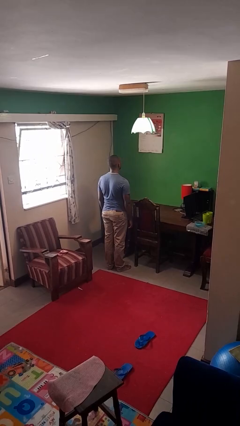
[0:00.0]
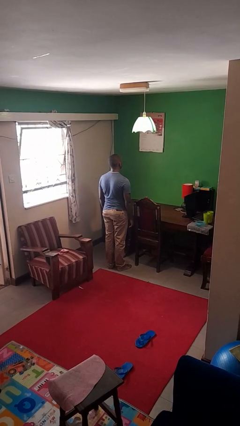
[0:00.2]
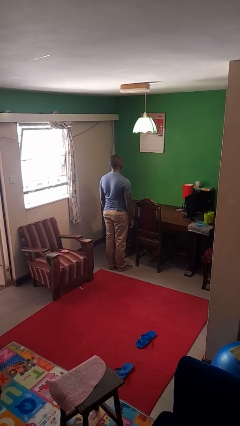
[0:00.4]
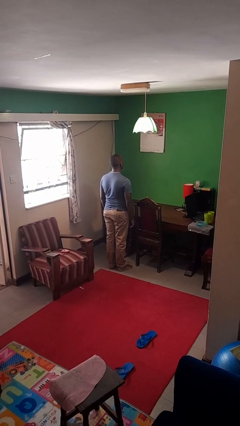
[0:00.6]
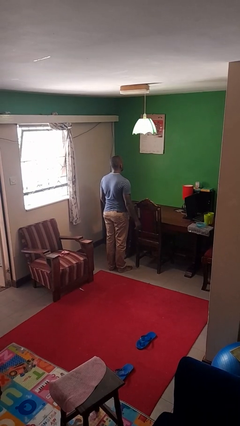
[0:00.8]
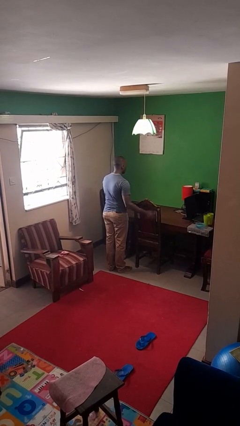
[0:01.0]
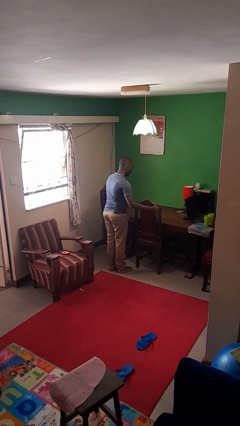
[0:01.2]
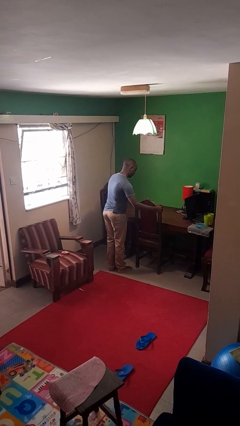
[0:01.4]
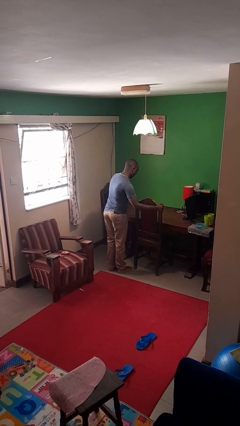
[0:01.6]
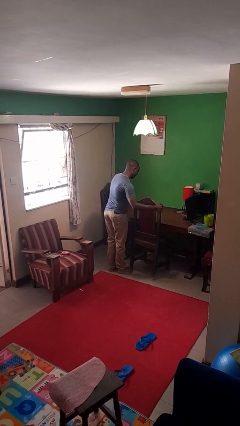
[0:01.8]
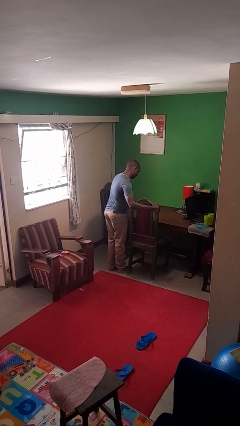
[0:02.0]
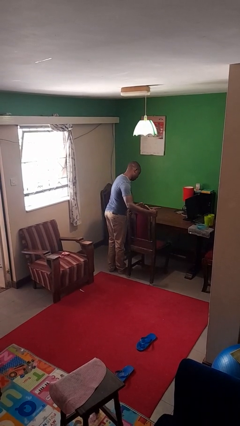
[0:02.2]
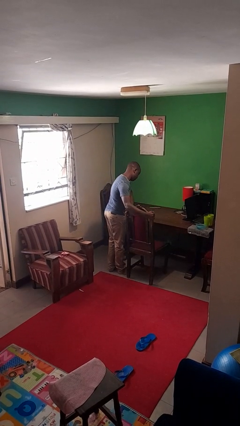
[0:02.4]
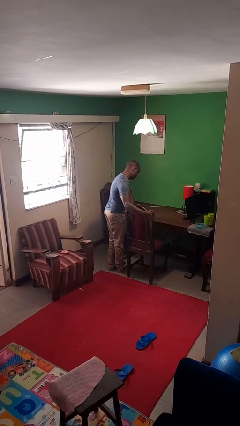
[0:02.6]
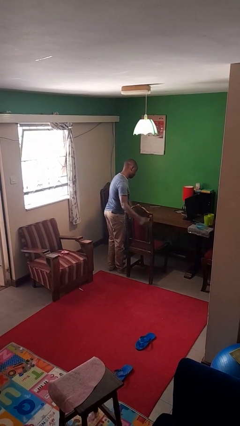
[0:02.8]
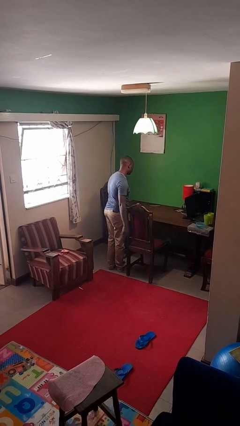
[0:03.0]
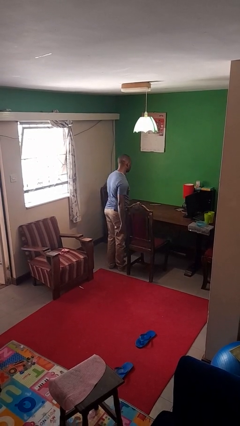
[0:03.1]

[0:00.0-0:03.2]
person pulls out chair

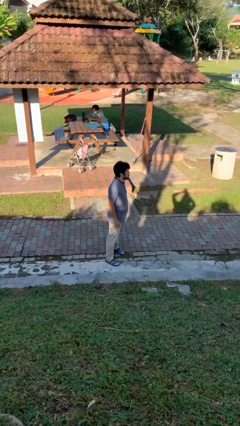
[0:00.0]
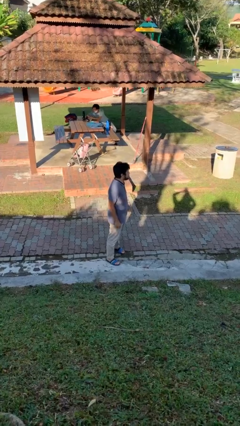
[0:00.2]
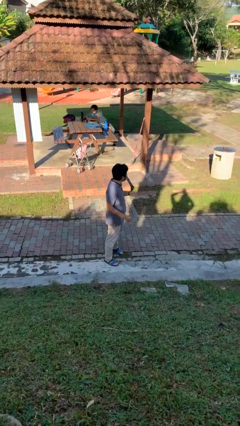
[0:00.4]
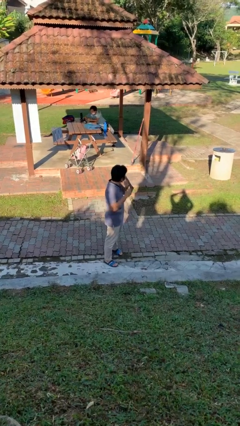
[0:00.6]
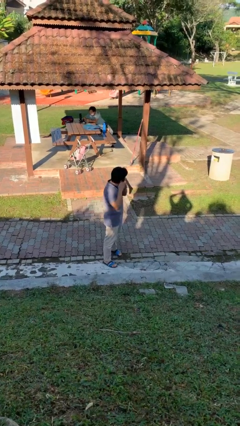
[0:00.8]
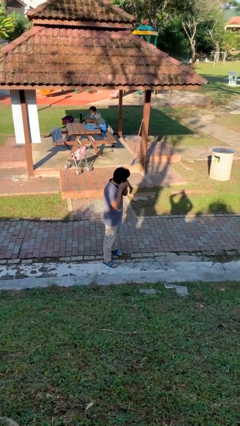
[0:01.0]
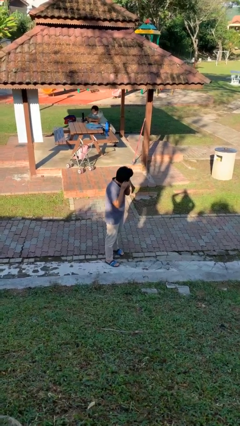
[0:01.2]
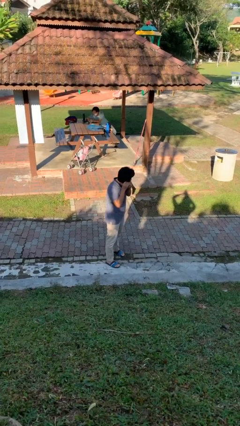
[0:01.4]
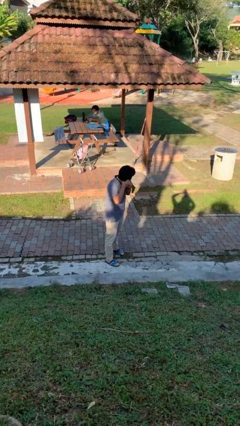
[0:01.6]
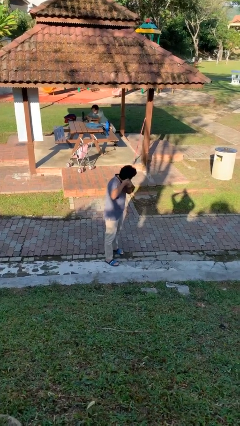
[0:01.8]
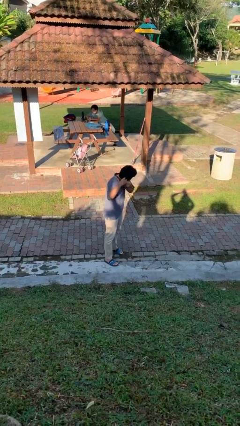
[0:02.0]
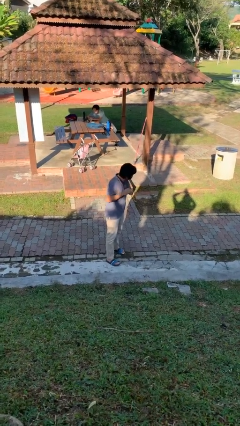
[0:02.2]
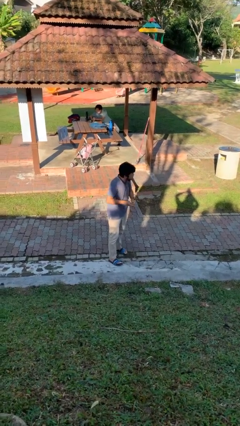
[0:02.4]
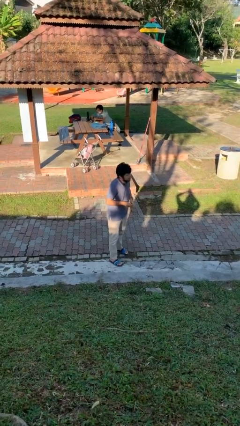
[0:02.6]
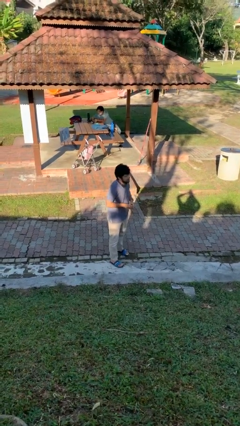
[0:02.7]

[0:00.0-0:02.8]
person takes off earrings

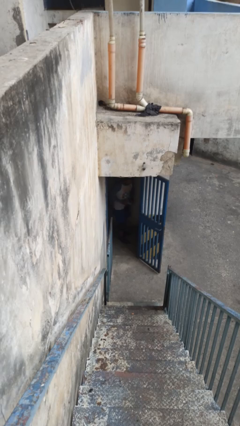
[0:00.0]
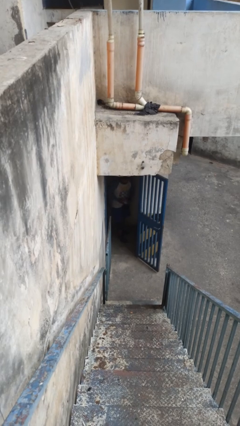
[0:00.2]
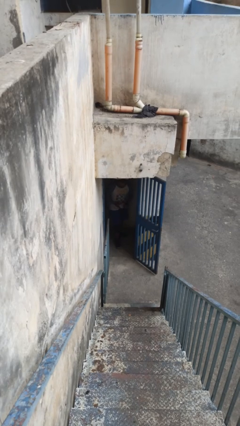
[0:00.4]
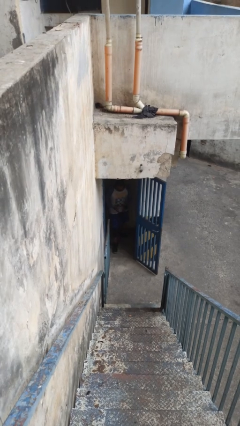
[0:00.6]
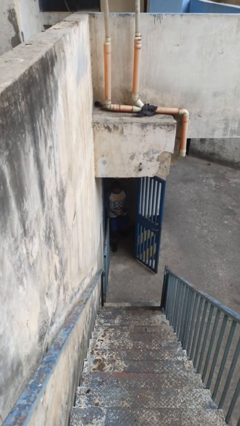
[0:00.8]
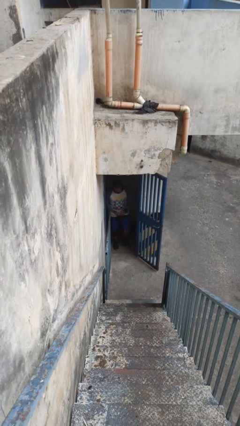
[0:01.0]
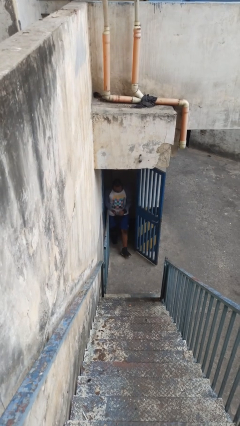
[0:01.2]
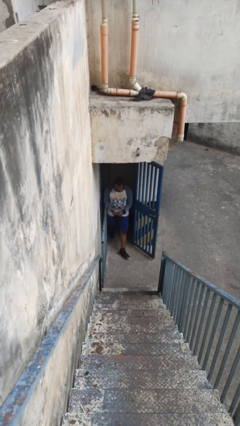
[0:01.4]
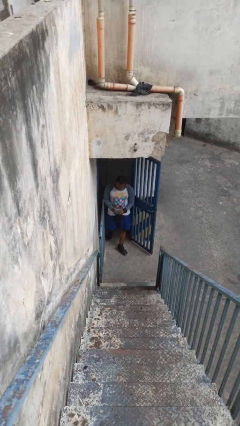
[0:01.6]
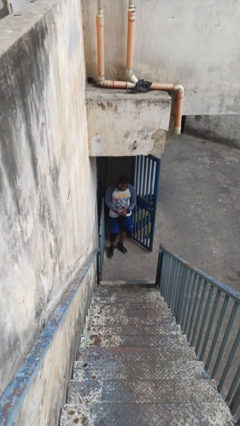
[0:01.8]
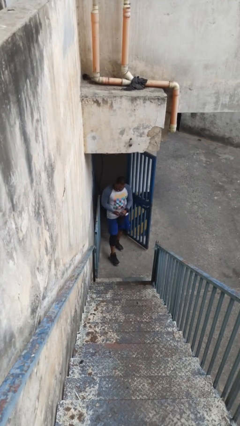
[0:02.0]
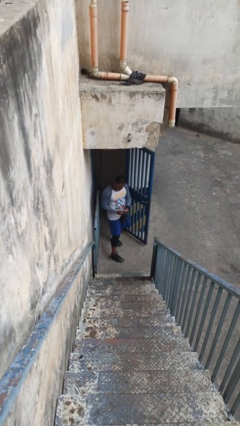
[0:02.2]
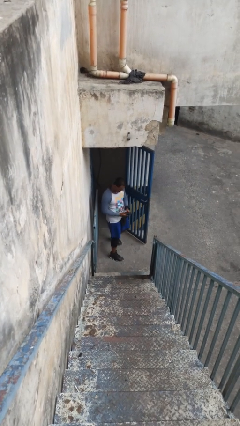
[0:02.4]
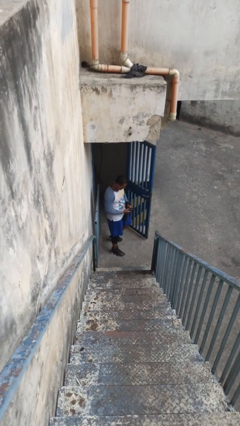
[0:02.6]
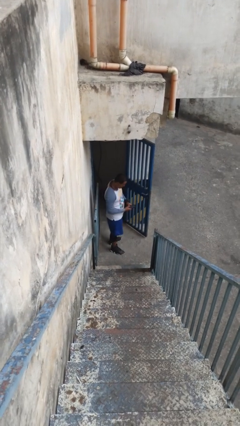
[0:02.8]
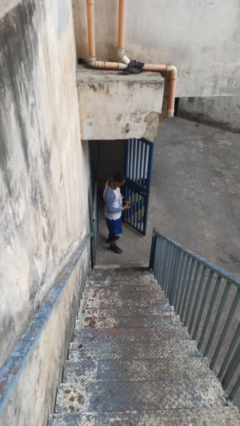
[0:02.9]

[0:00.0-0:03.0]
person enters scene through structure

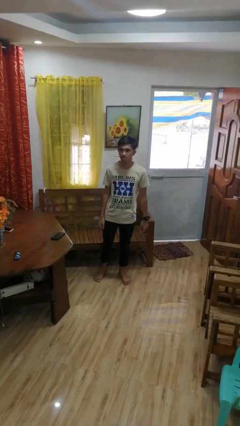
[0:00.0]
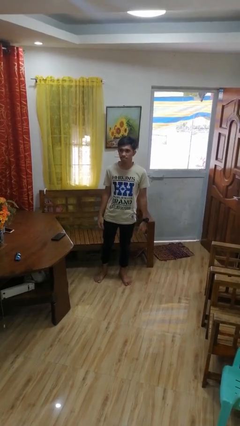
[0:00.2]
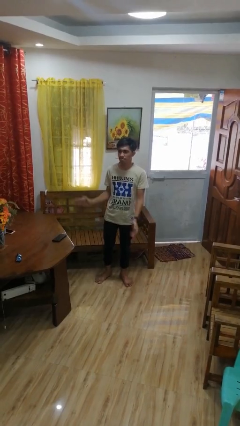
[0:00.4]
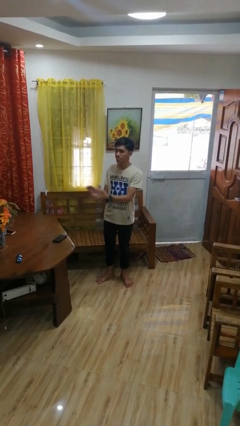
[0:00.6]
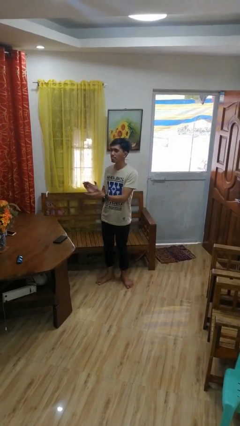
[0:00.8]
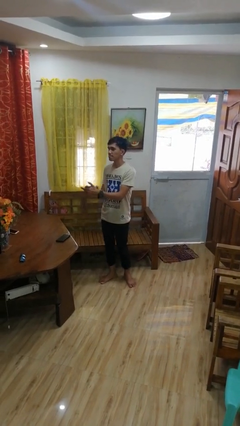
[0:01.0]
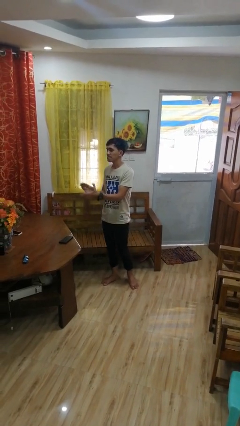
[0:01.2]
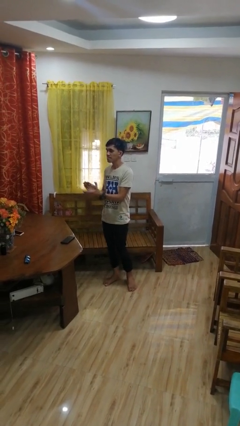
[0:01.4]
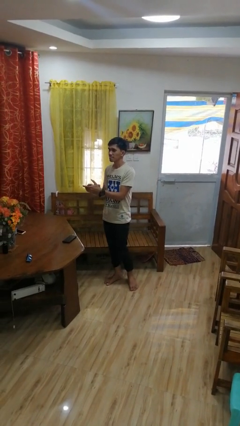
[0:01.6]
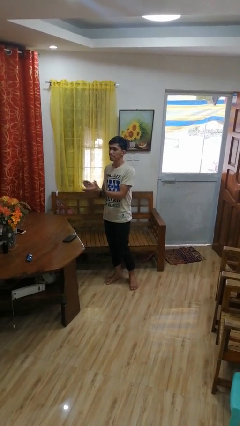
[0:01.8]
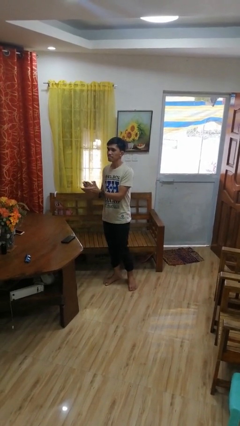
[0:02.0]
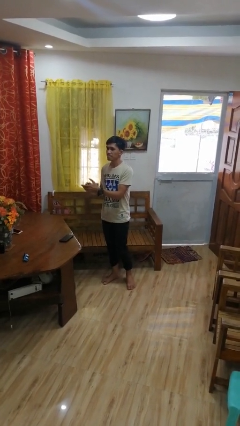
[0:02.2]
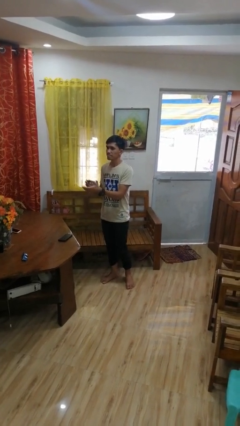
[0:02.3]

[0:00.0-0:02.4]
person claps hands

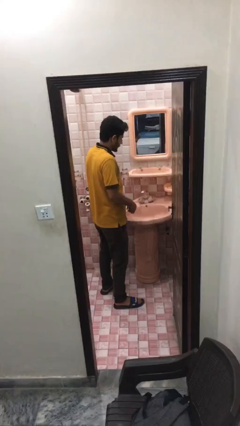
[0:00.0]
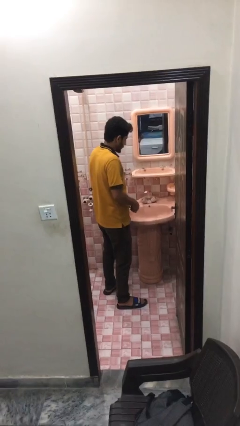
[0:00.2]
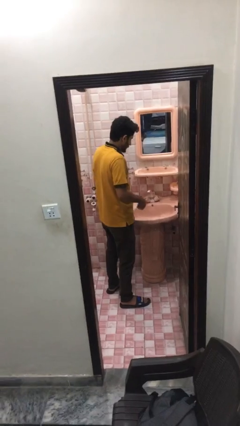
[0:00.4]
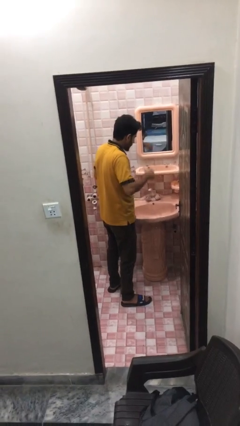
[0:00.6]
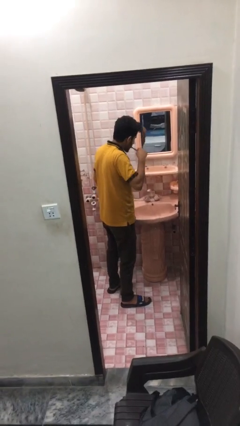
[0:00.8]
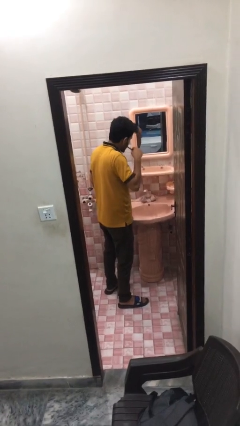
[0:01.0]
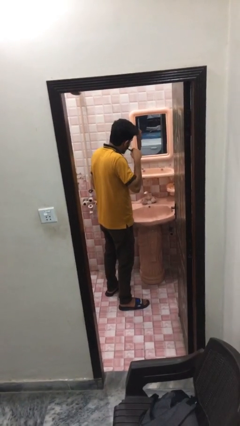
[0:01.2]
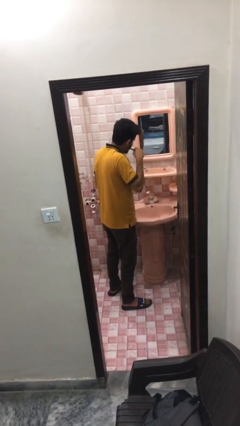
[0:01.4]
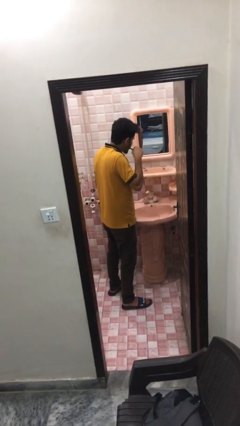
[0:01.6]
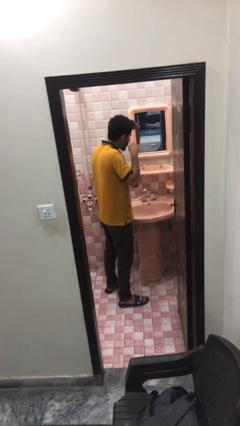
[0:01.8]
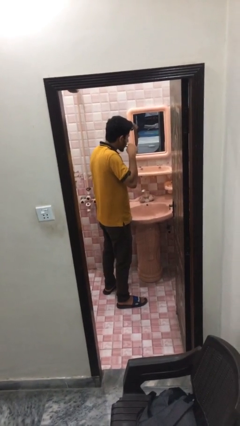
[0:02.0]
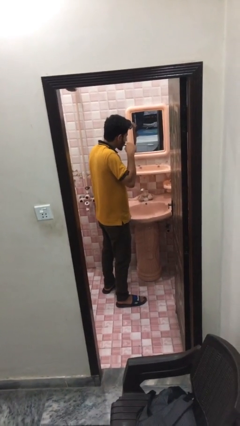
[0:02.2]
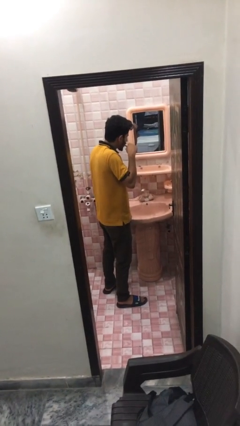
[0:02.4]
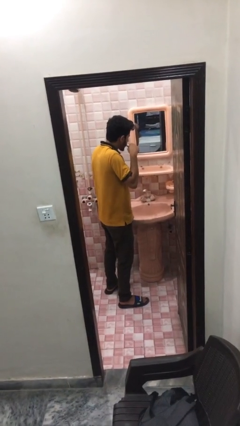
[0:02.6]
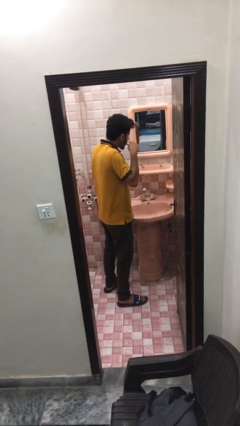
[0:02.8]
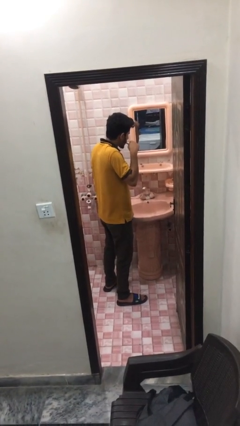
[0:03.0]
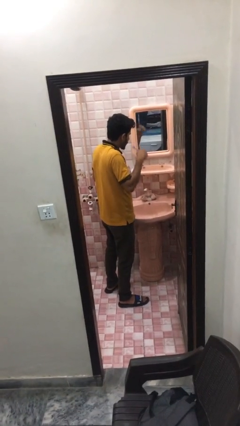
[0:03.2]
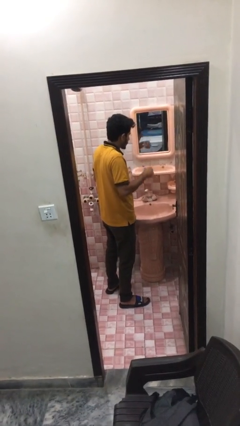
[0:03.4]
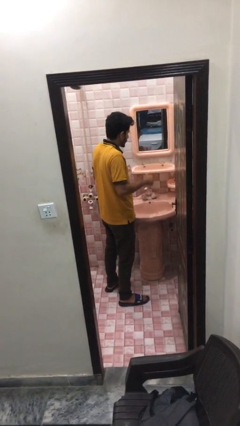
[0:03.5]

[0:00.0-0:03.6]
person brushes teeth

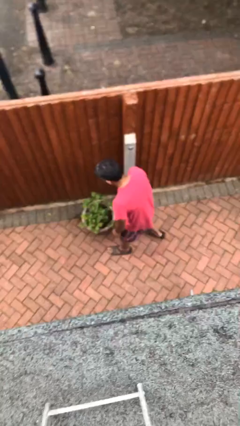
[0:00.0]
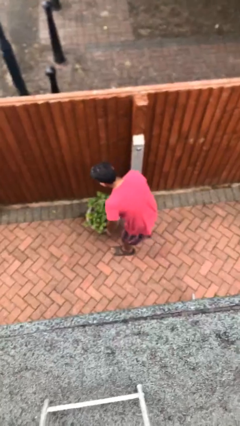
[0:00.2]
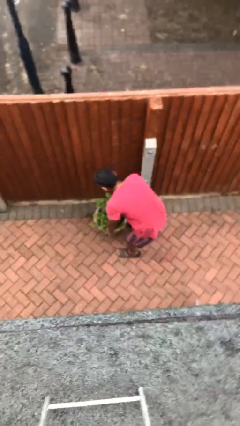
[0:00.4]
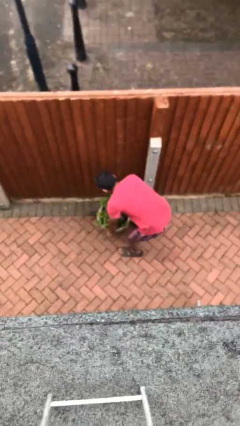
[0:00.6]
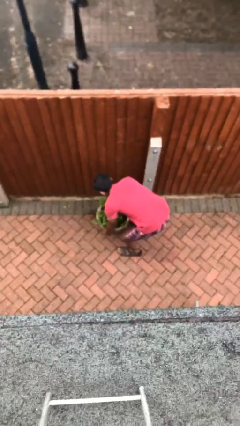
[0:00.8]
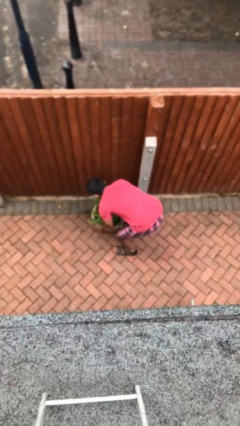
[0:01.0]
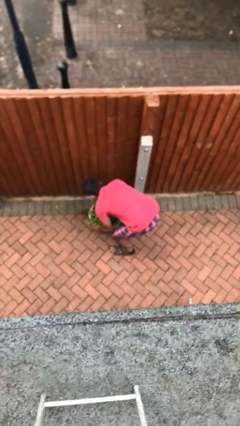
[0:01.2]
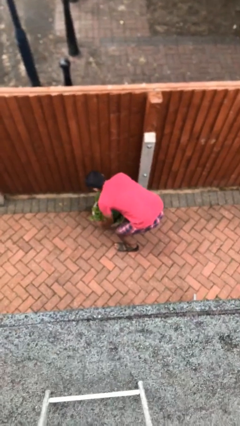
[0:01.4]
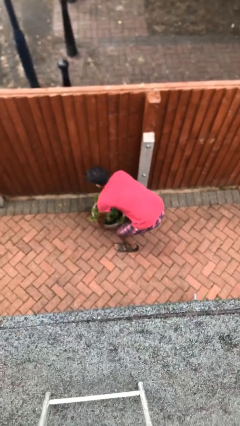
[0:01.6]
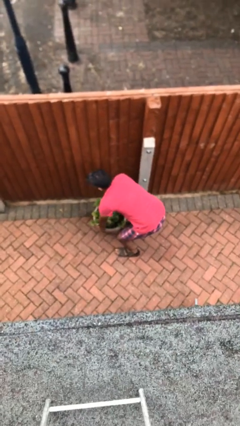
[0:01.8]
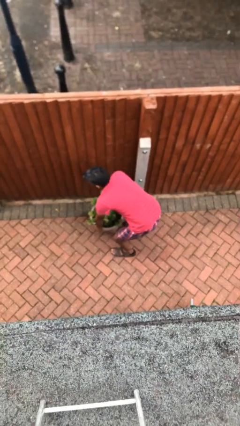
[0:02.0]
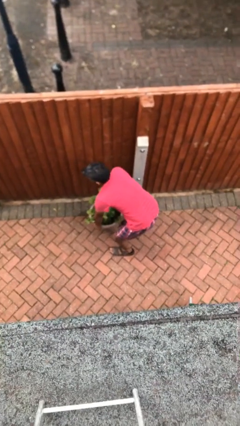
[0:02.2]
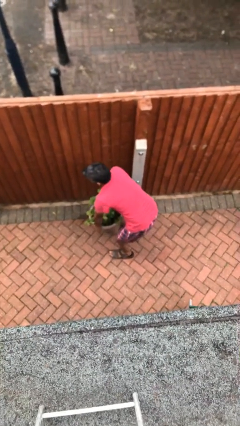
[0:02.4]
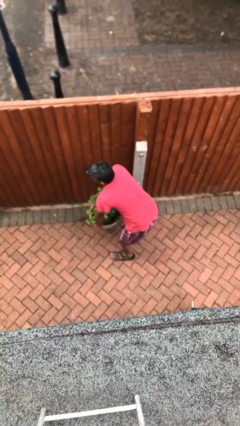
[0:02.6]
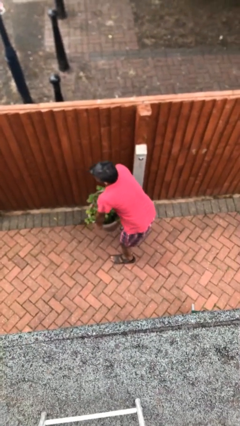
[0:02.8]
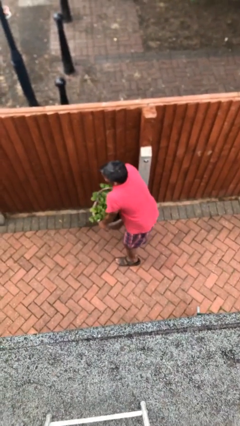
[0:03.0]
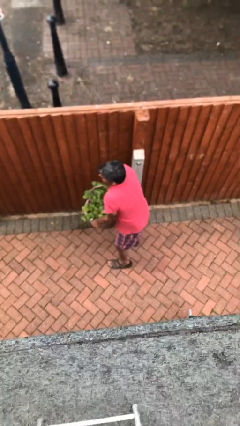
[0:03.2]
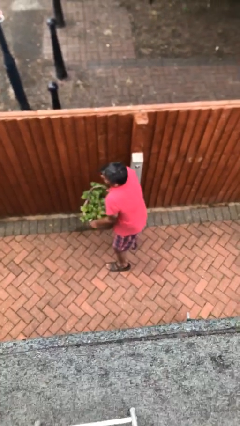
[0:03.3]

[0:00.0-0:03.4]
person picks up object from floor
